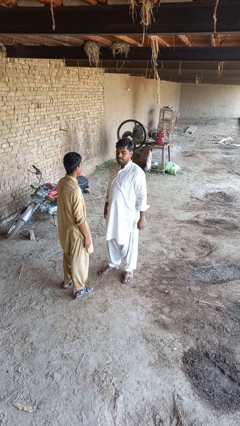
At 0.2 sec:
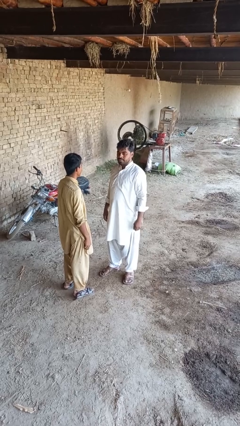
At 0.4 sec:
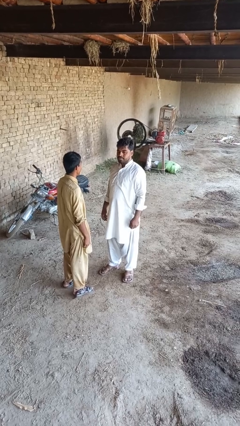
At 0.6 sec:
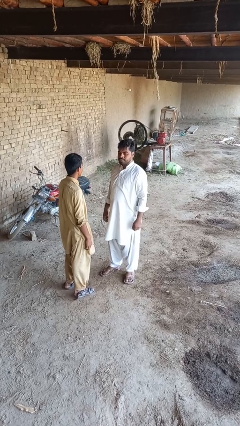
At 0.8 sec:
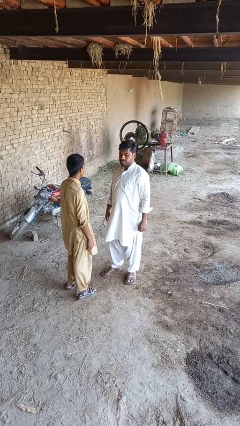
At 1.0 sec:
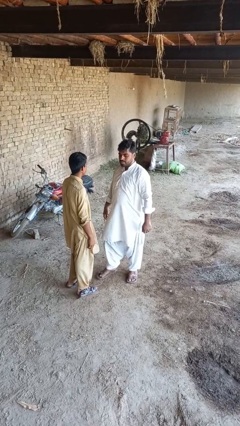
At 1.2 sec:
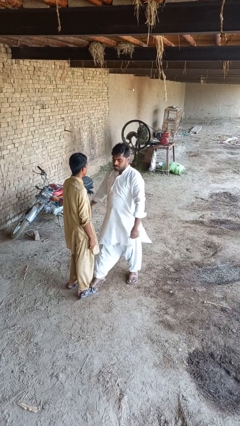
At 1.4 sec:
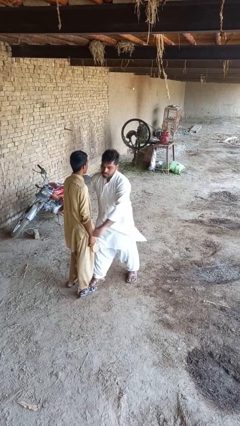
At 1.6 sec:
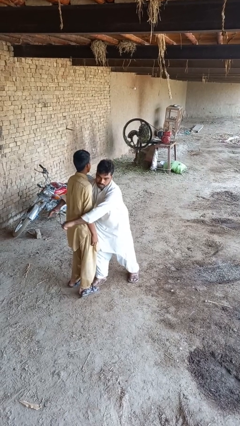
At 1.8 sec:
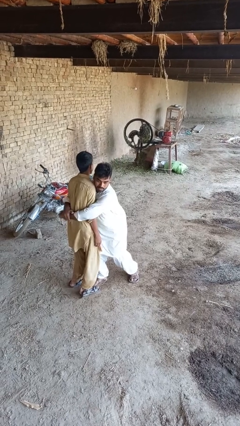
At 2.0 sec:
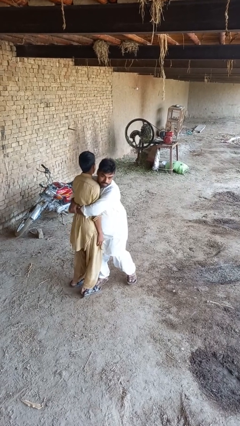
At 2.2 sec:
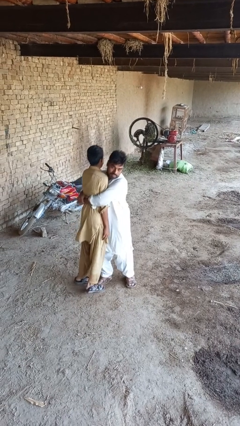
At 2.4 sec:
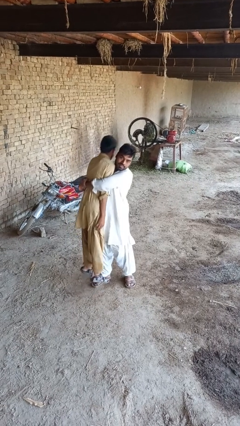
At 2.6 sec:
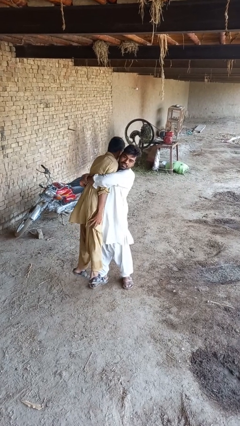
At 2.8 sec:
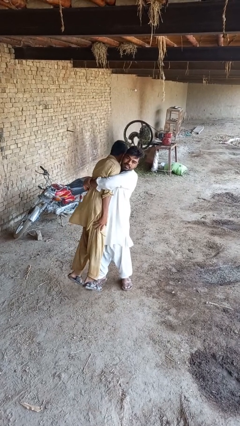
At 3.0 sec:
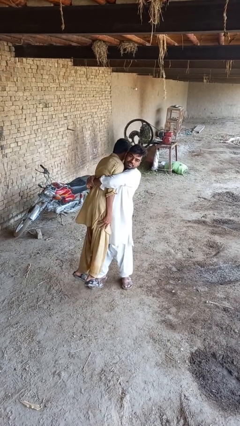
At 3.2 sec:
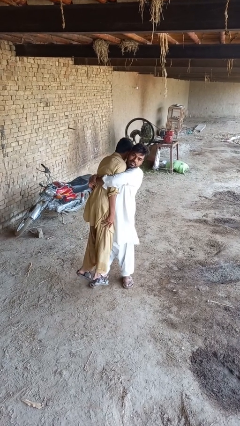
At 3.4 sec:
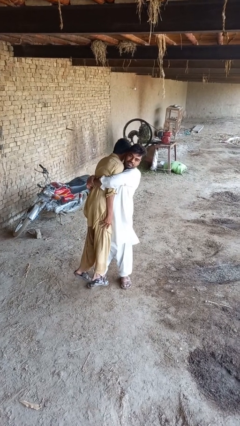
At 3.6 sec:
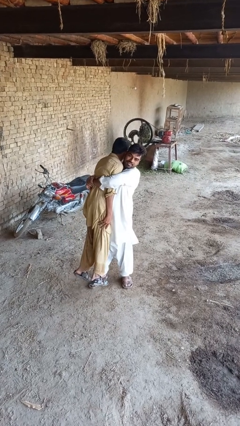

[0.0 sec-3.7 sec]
person picks up person

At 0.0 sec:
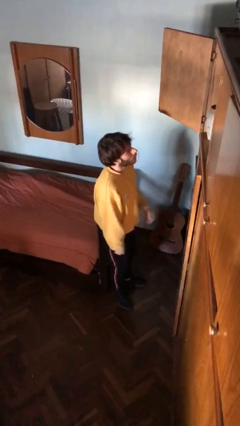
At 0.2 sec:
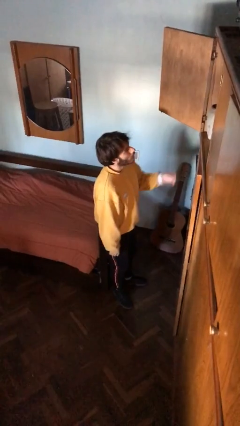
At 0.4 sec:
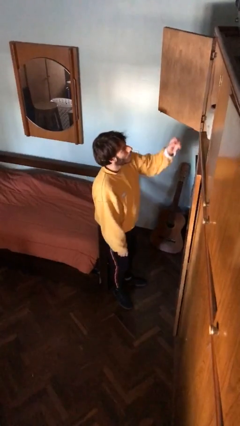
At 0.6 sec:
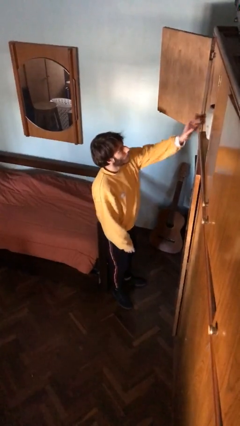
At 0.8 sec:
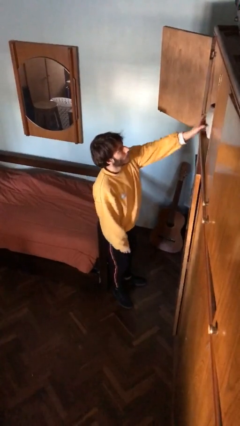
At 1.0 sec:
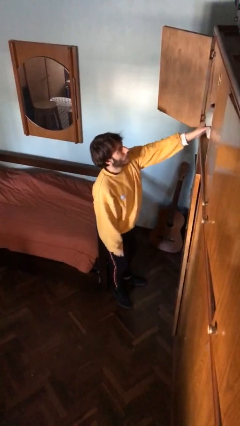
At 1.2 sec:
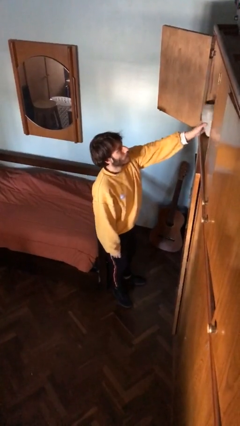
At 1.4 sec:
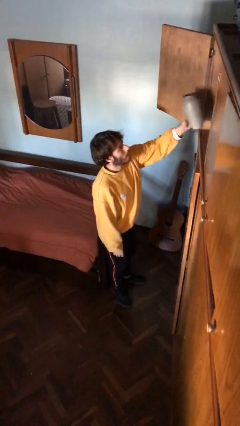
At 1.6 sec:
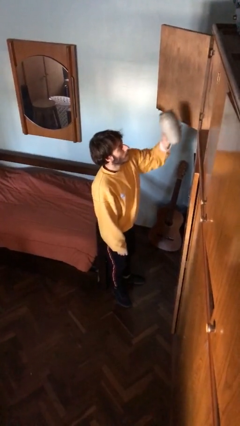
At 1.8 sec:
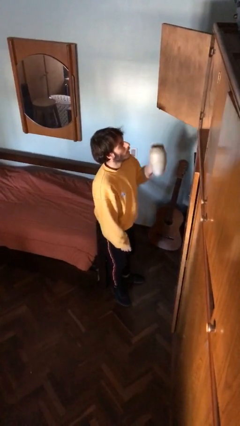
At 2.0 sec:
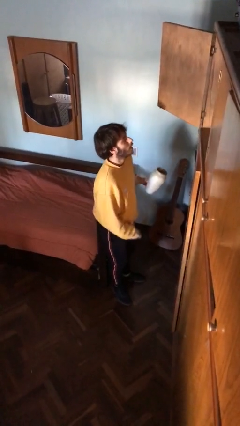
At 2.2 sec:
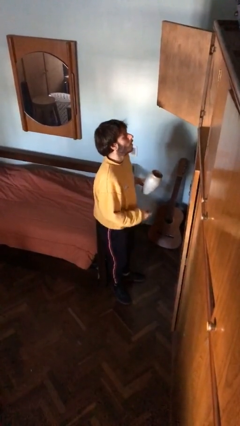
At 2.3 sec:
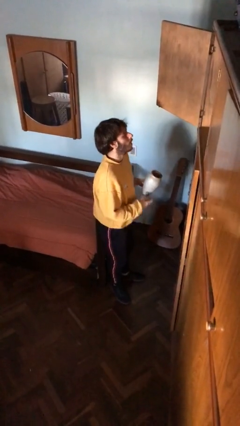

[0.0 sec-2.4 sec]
person picks up object from cabinet

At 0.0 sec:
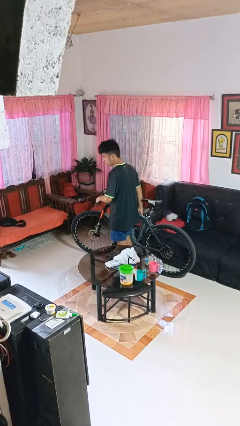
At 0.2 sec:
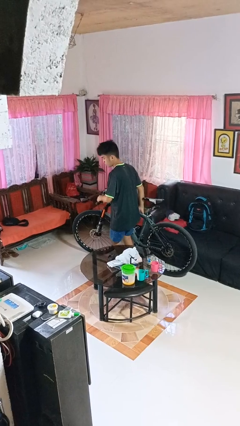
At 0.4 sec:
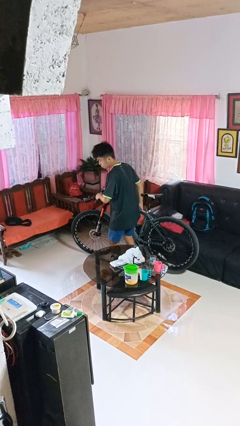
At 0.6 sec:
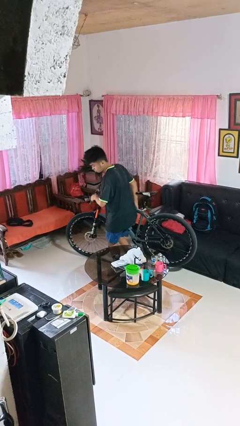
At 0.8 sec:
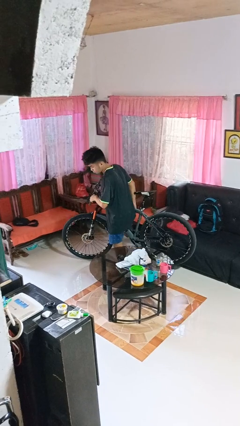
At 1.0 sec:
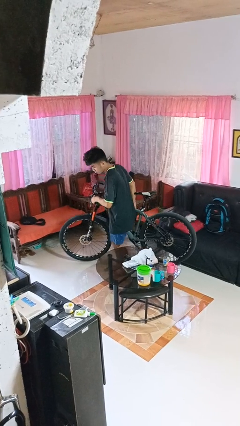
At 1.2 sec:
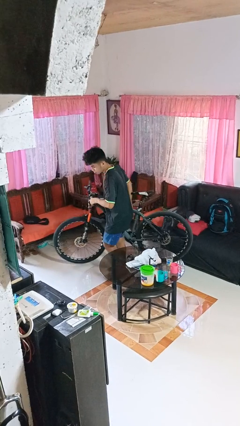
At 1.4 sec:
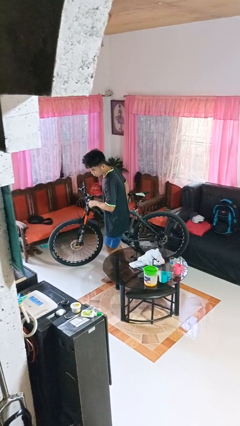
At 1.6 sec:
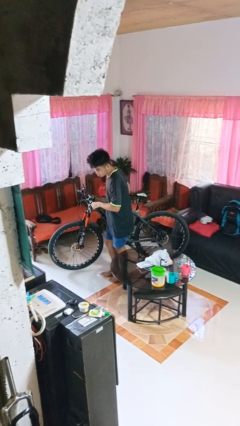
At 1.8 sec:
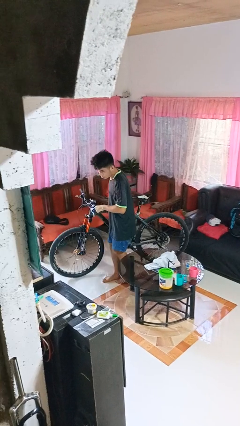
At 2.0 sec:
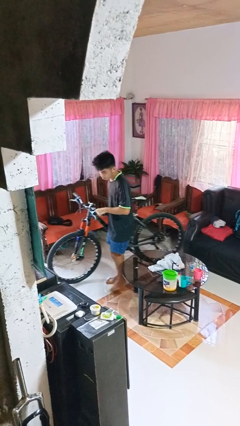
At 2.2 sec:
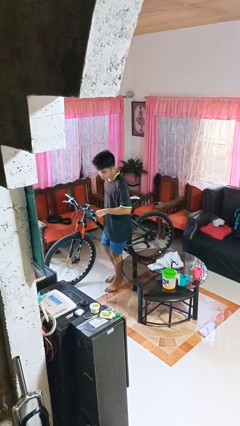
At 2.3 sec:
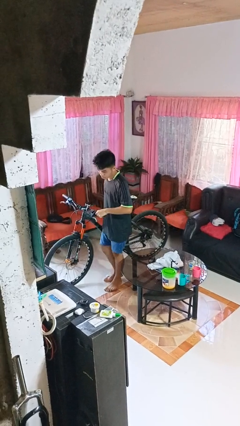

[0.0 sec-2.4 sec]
person carries bicycle

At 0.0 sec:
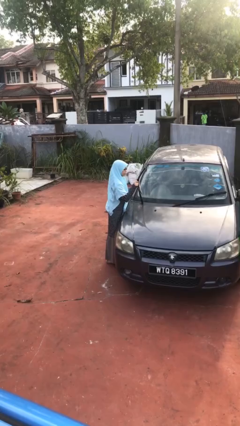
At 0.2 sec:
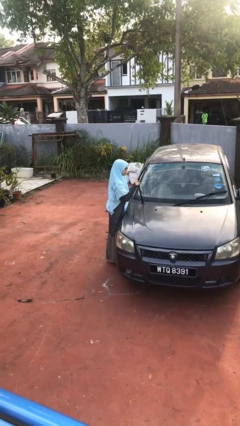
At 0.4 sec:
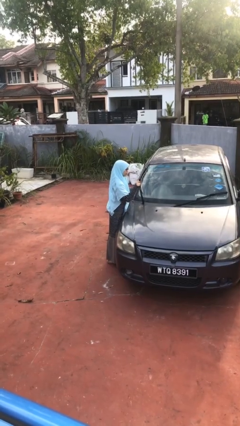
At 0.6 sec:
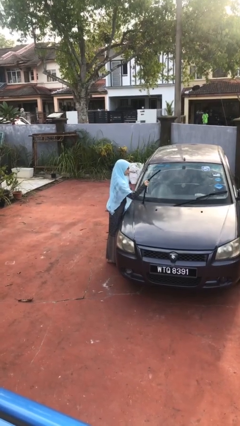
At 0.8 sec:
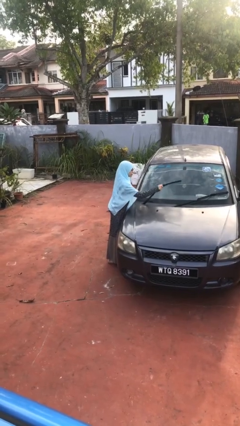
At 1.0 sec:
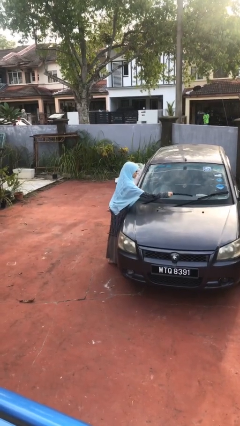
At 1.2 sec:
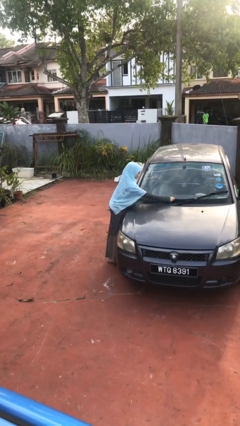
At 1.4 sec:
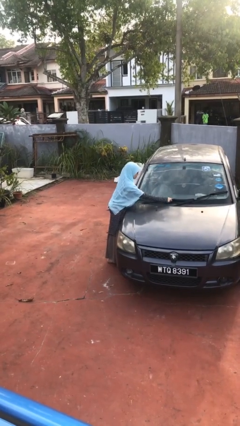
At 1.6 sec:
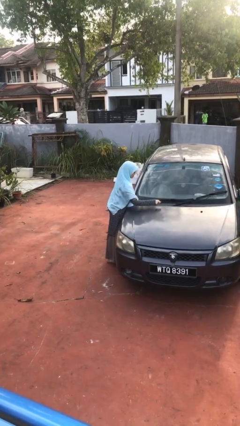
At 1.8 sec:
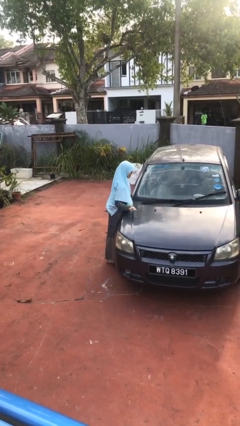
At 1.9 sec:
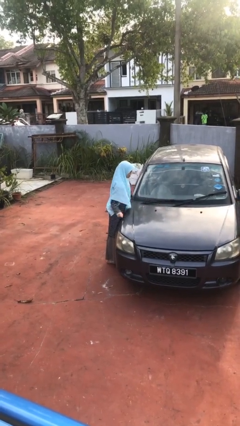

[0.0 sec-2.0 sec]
person flips down car wipers

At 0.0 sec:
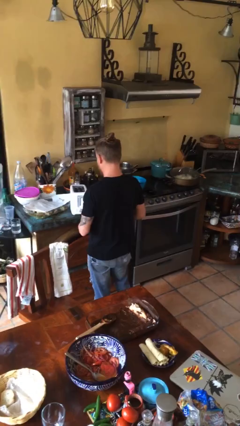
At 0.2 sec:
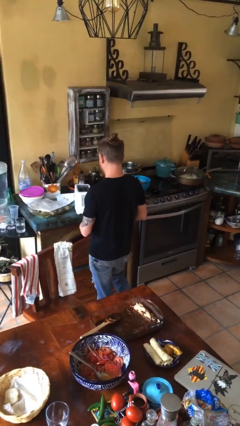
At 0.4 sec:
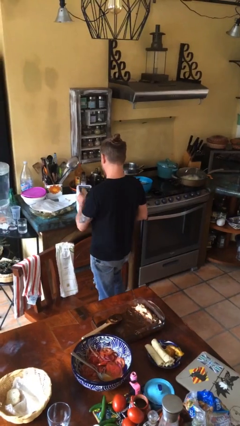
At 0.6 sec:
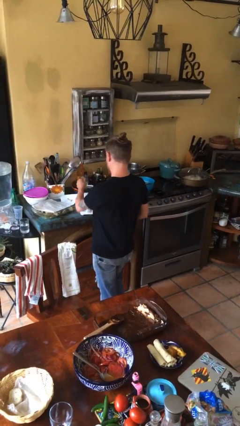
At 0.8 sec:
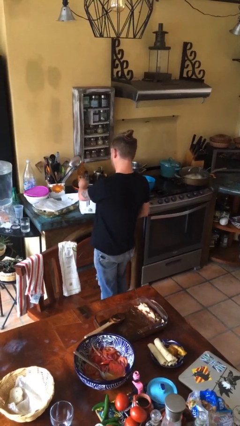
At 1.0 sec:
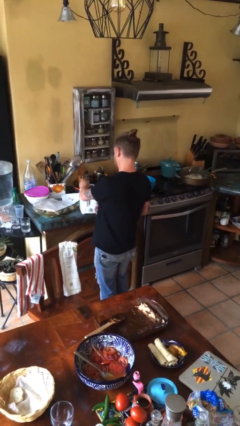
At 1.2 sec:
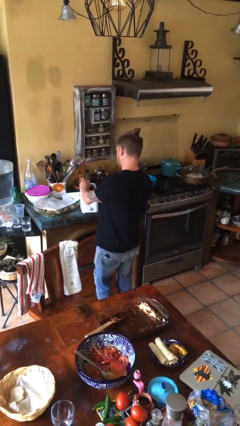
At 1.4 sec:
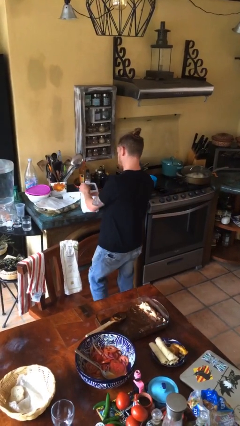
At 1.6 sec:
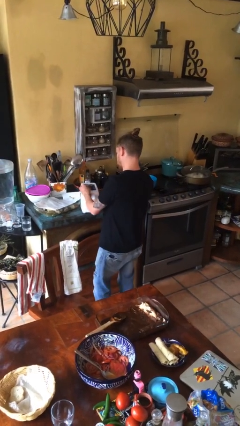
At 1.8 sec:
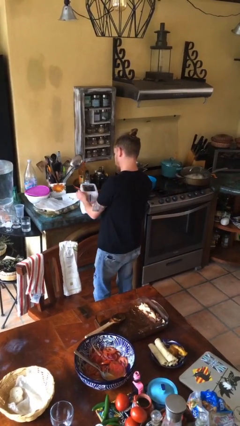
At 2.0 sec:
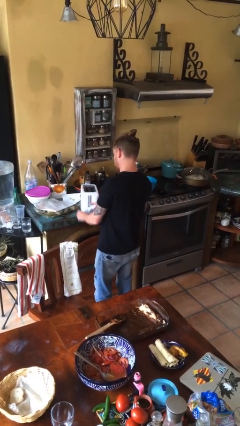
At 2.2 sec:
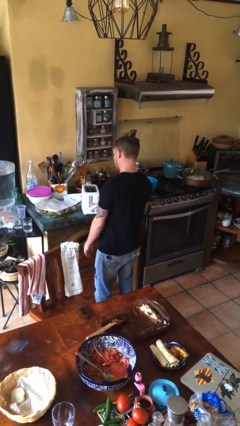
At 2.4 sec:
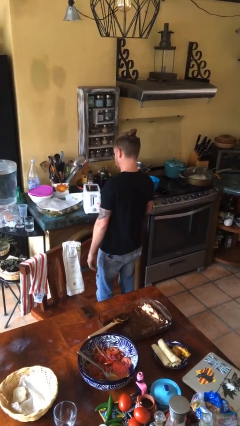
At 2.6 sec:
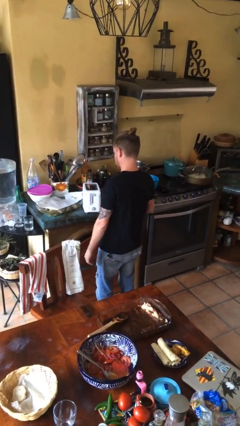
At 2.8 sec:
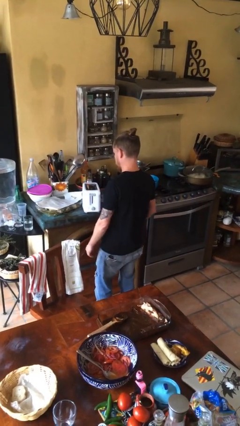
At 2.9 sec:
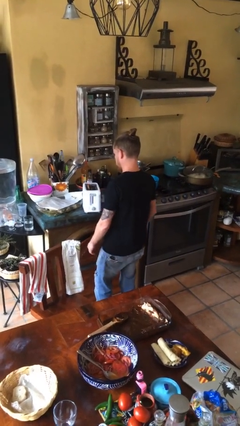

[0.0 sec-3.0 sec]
person puts object into toaster

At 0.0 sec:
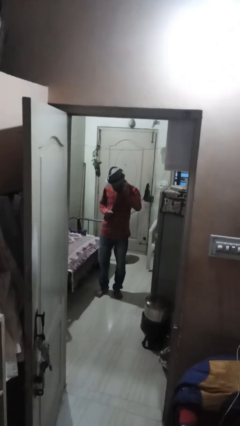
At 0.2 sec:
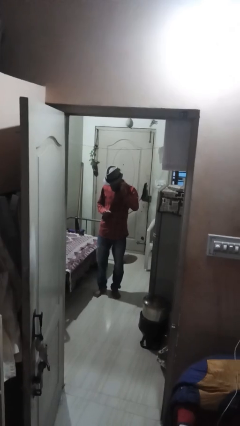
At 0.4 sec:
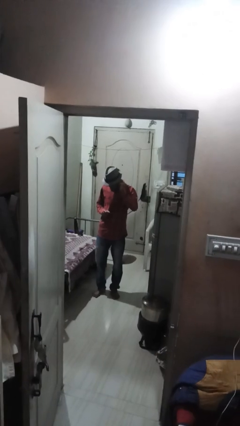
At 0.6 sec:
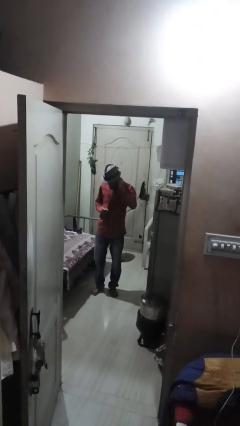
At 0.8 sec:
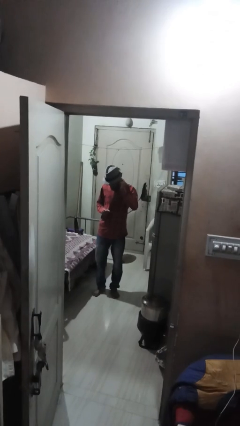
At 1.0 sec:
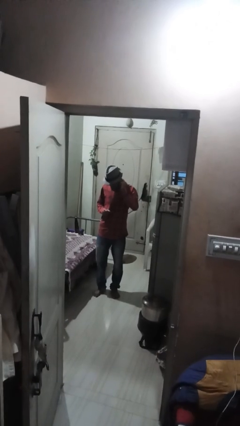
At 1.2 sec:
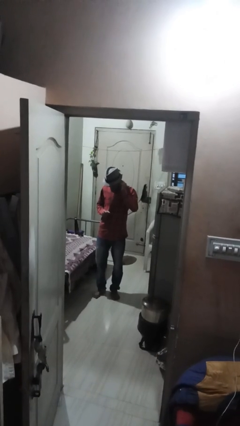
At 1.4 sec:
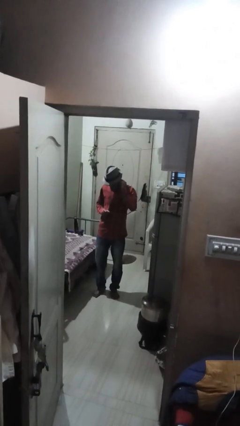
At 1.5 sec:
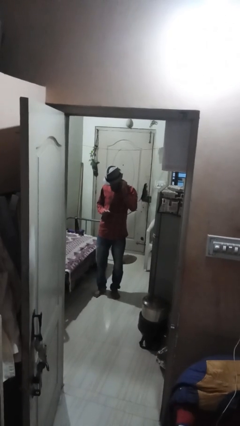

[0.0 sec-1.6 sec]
person touches earlobe

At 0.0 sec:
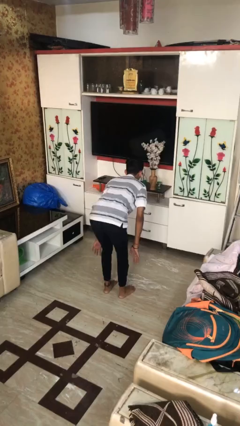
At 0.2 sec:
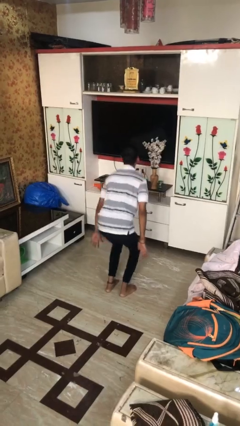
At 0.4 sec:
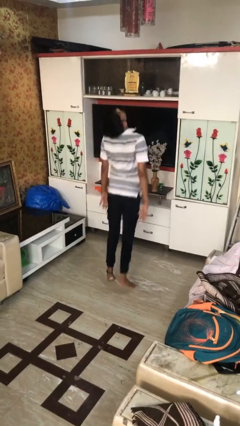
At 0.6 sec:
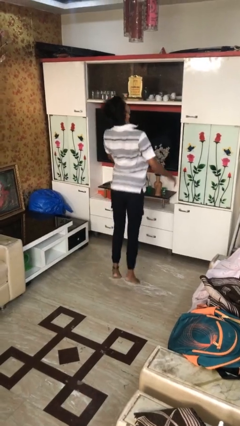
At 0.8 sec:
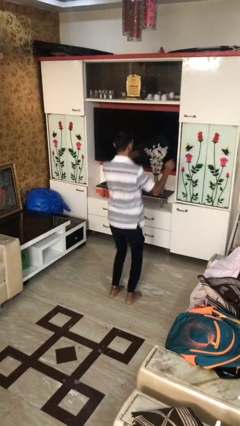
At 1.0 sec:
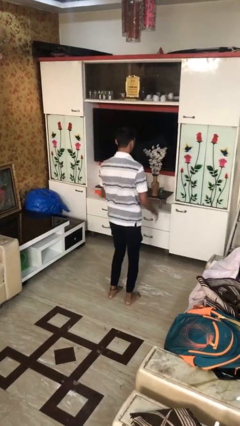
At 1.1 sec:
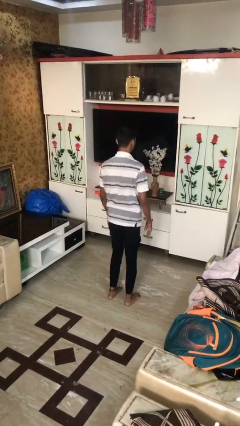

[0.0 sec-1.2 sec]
person somersaults

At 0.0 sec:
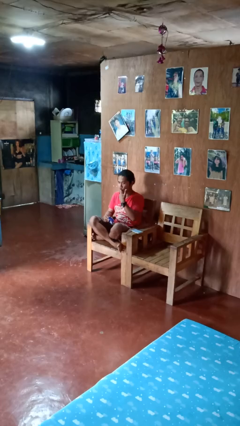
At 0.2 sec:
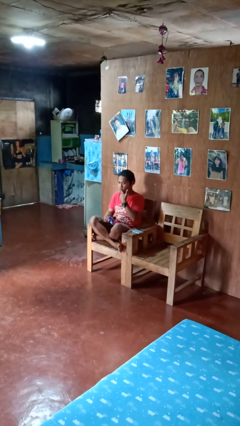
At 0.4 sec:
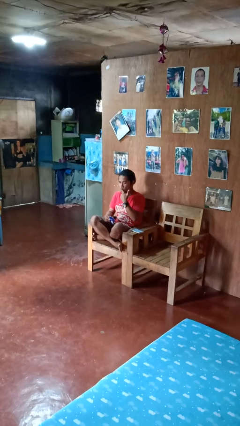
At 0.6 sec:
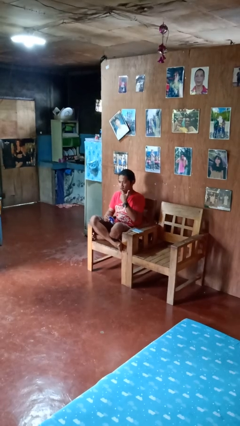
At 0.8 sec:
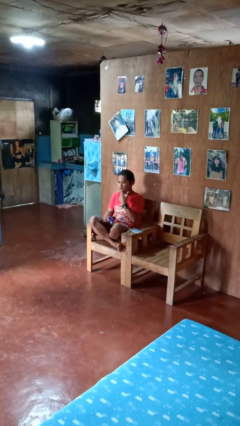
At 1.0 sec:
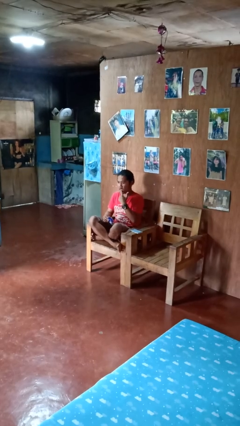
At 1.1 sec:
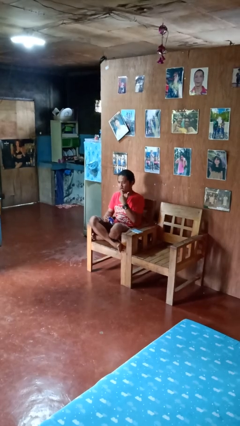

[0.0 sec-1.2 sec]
person licks fingers
